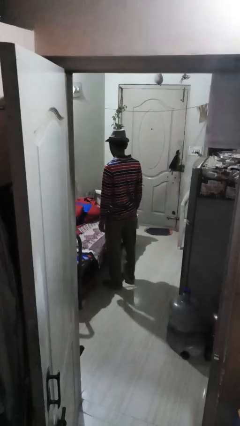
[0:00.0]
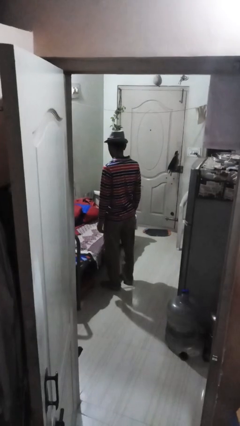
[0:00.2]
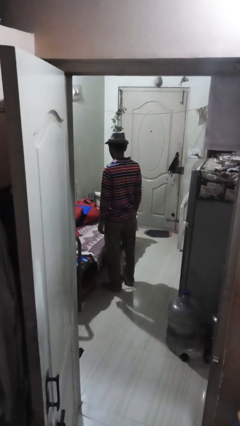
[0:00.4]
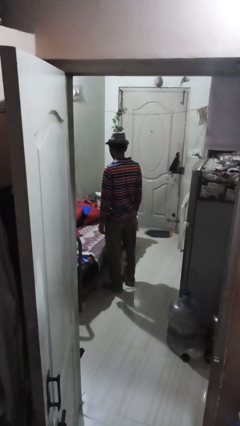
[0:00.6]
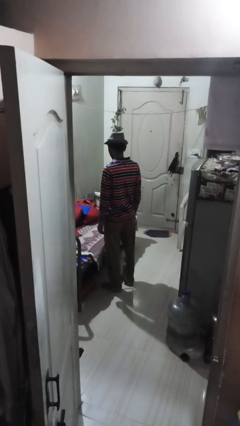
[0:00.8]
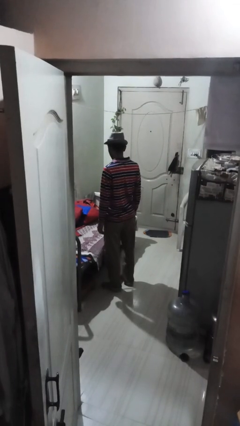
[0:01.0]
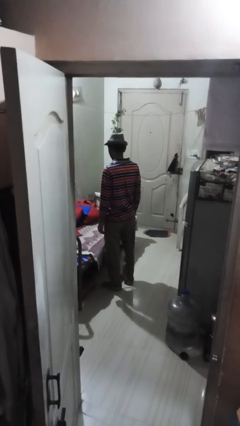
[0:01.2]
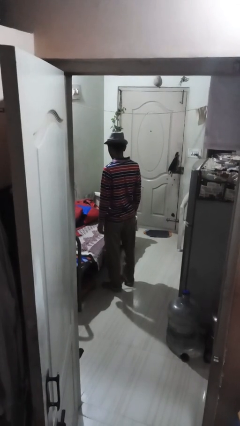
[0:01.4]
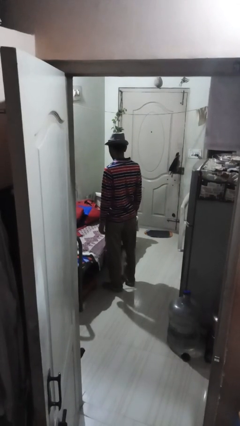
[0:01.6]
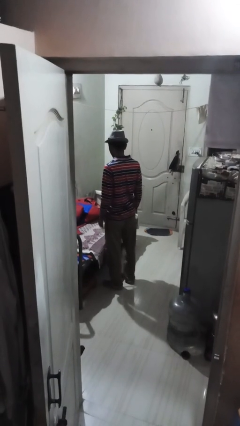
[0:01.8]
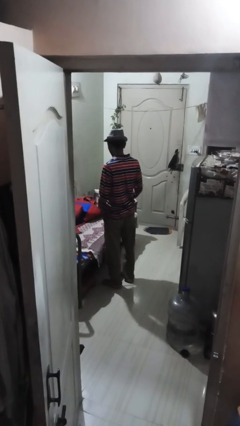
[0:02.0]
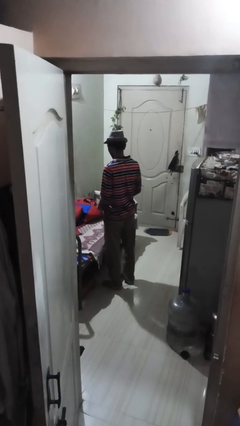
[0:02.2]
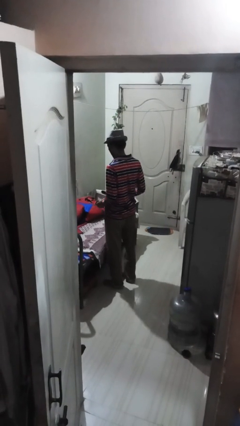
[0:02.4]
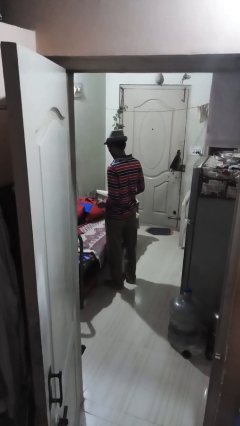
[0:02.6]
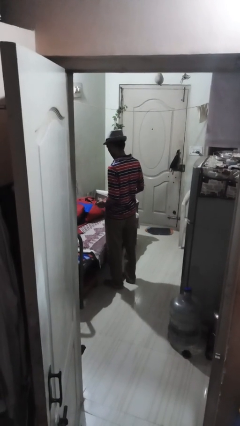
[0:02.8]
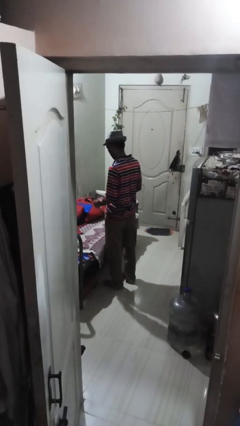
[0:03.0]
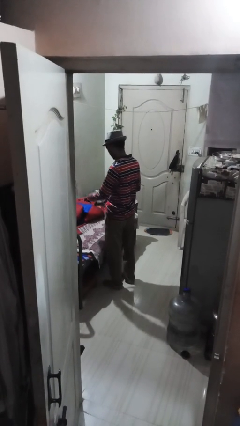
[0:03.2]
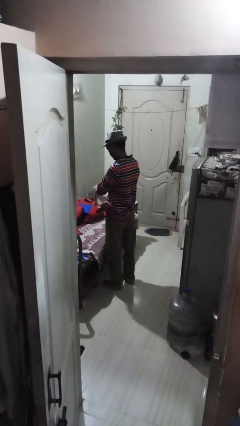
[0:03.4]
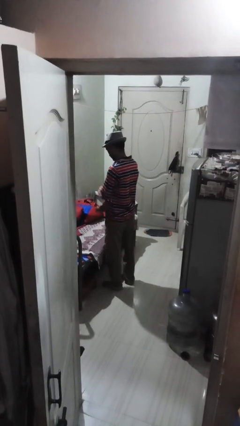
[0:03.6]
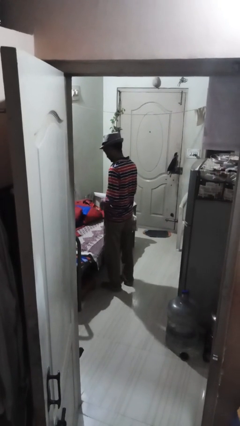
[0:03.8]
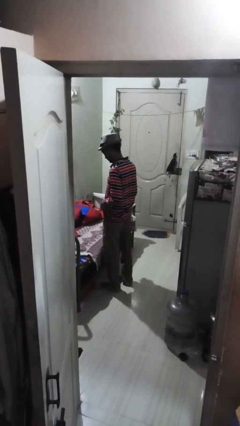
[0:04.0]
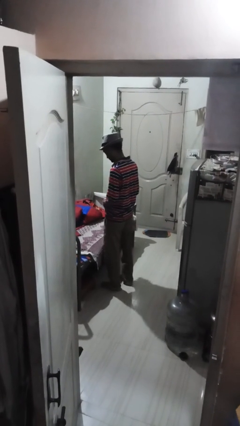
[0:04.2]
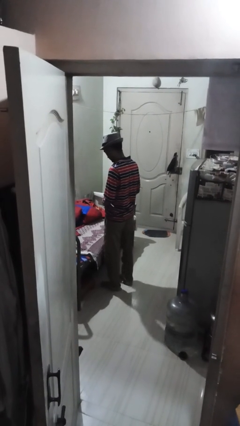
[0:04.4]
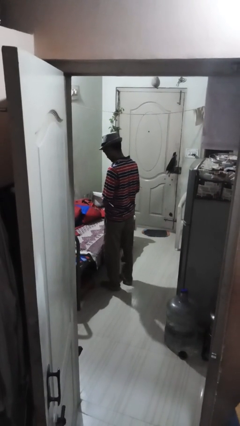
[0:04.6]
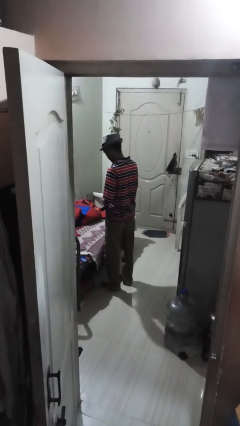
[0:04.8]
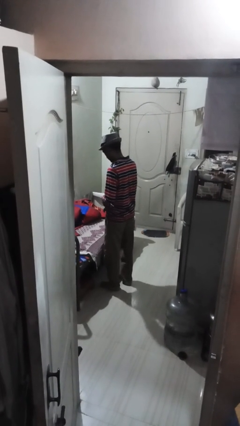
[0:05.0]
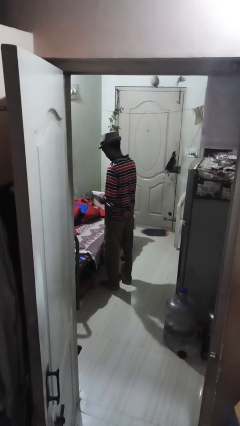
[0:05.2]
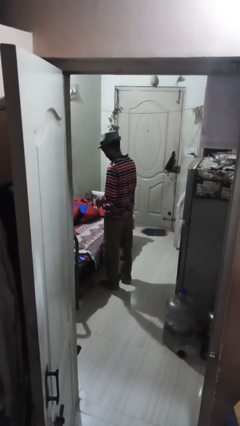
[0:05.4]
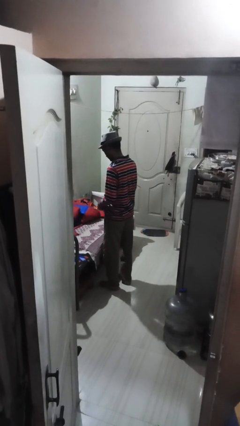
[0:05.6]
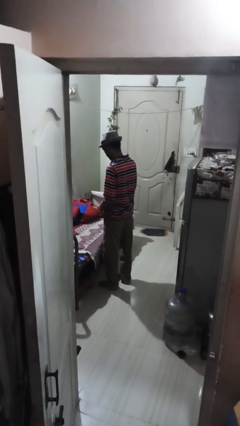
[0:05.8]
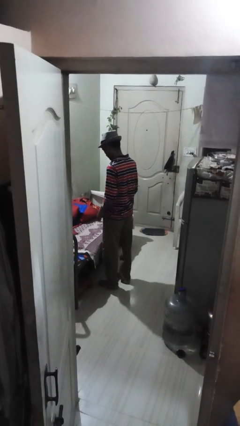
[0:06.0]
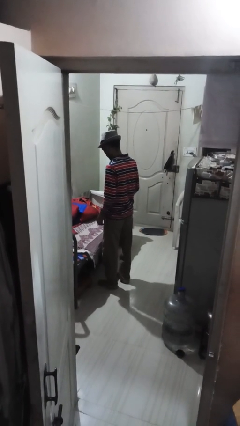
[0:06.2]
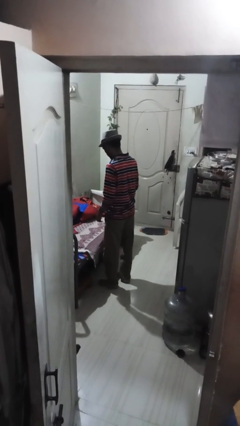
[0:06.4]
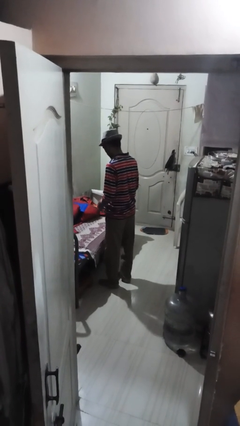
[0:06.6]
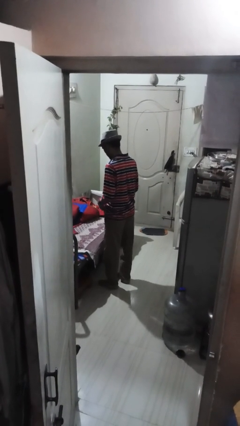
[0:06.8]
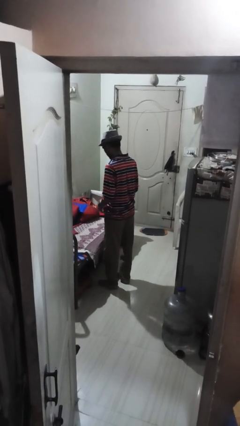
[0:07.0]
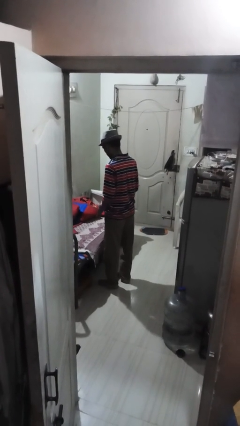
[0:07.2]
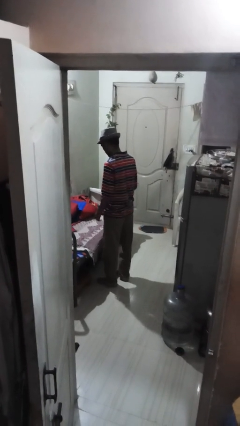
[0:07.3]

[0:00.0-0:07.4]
person puts on belt

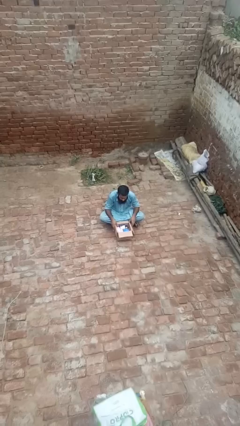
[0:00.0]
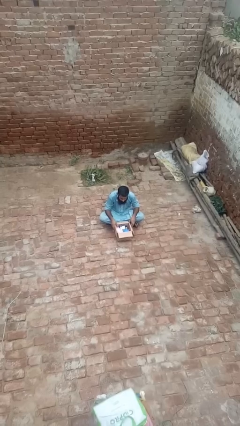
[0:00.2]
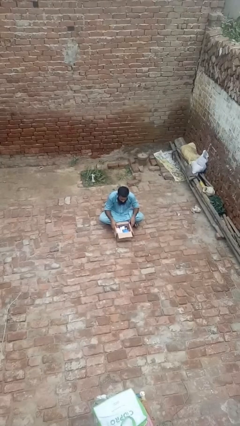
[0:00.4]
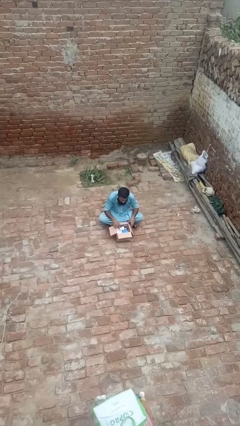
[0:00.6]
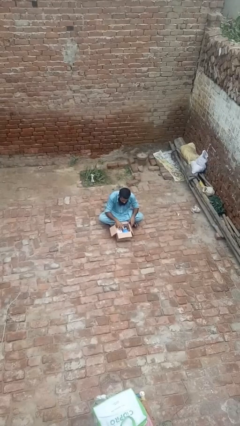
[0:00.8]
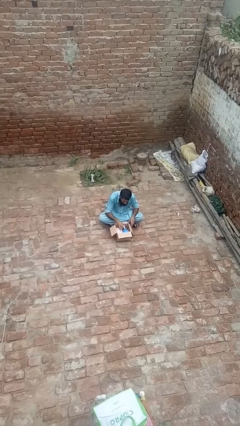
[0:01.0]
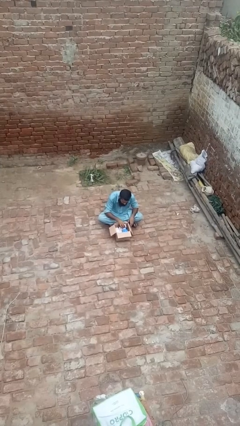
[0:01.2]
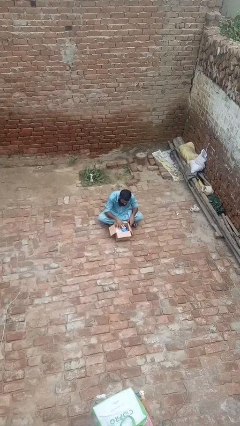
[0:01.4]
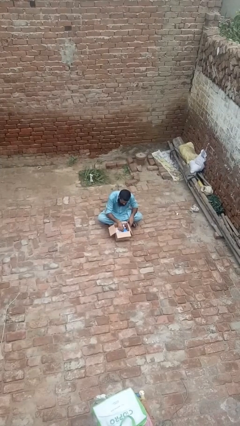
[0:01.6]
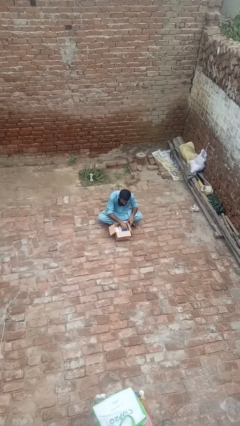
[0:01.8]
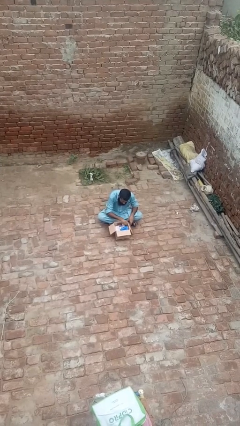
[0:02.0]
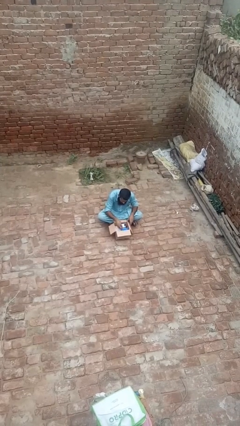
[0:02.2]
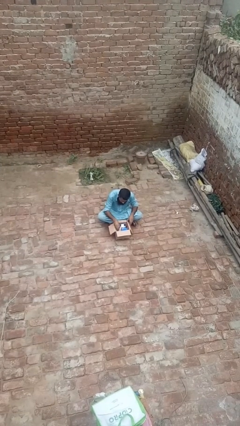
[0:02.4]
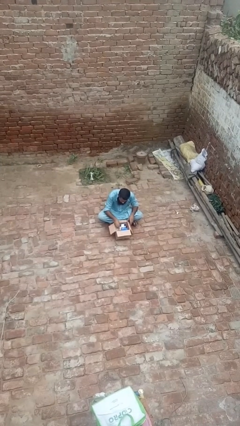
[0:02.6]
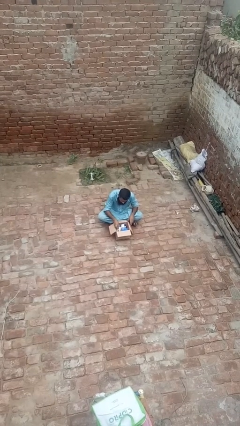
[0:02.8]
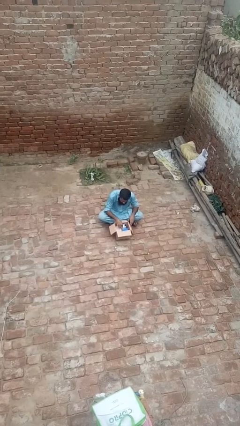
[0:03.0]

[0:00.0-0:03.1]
person searches in box

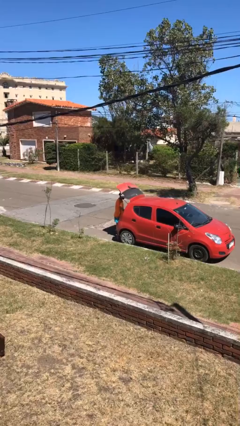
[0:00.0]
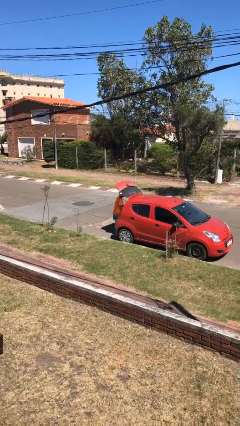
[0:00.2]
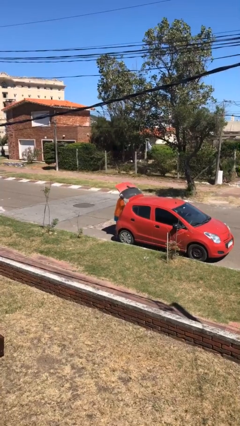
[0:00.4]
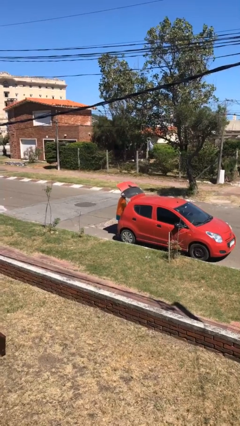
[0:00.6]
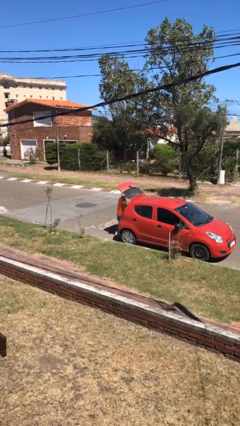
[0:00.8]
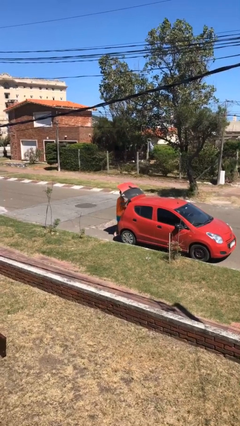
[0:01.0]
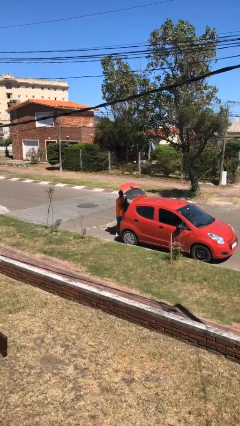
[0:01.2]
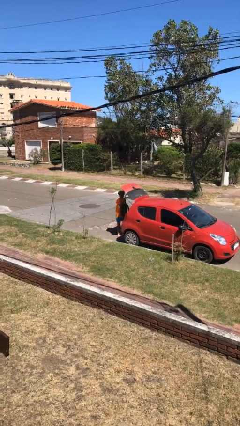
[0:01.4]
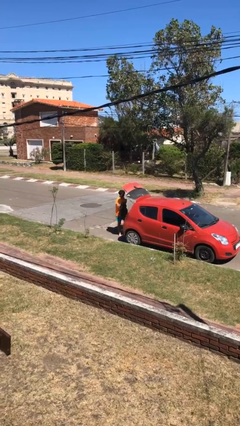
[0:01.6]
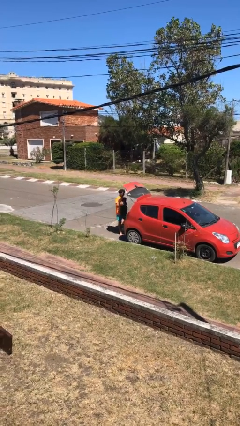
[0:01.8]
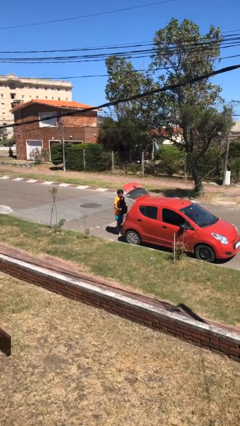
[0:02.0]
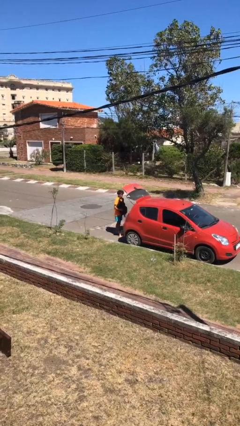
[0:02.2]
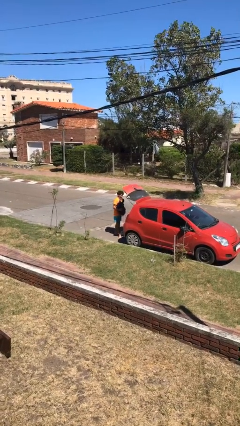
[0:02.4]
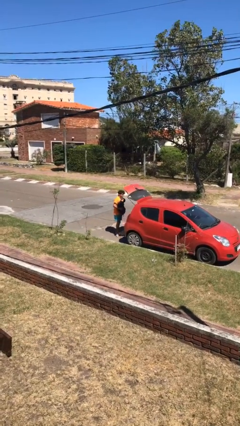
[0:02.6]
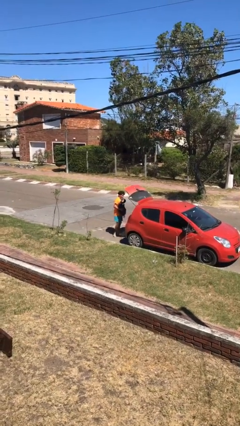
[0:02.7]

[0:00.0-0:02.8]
person unloads car

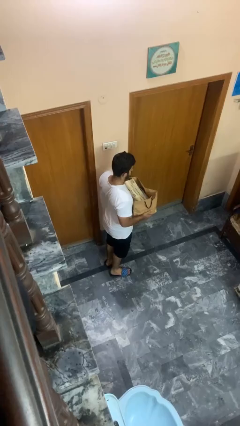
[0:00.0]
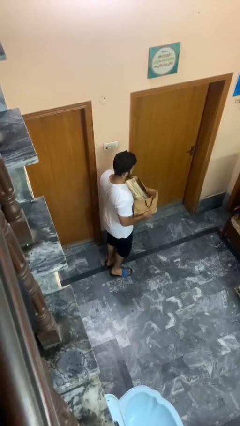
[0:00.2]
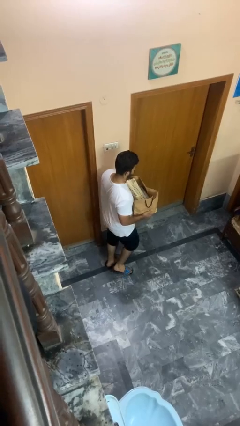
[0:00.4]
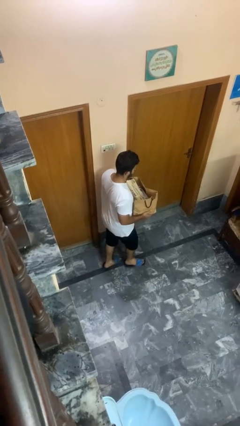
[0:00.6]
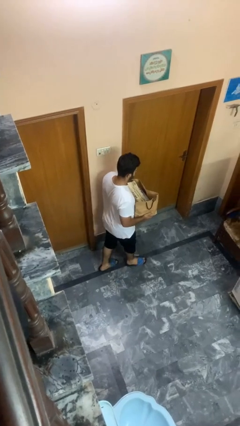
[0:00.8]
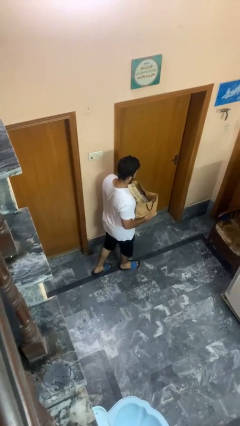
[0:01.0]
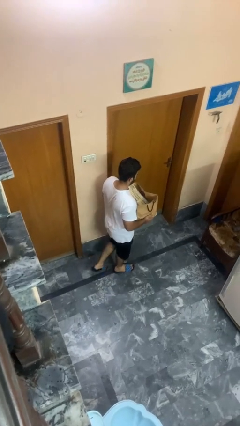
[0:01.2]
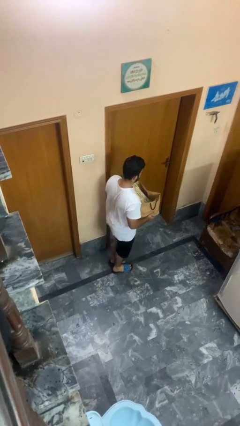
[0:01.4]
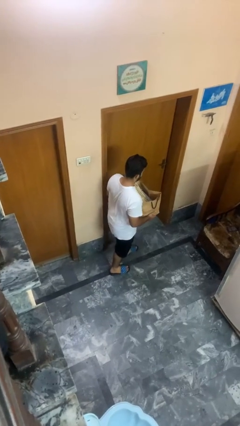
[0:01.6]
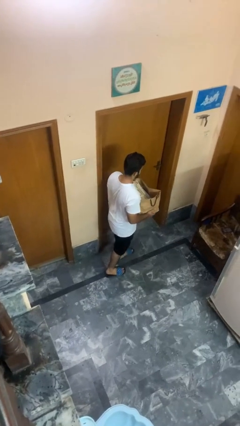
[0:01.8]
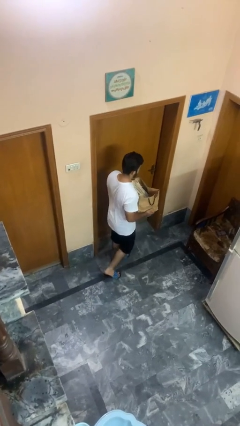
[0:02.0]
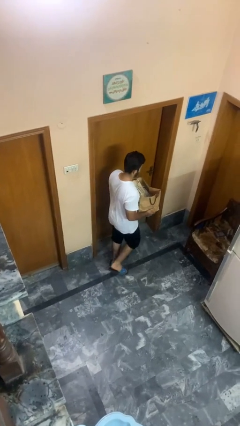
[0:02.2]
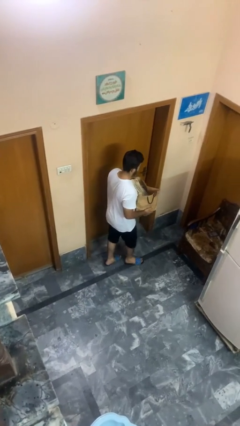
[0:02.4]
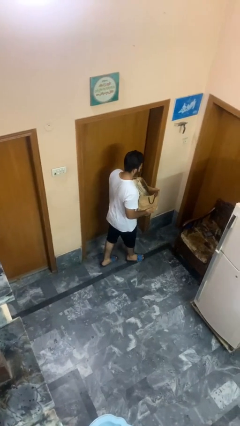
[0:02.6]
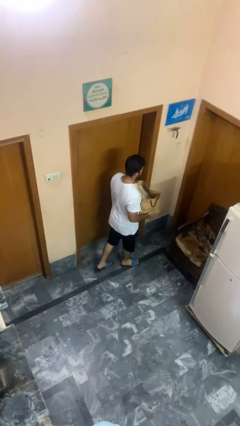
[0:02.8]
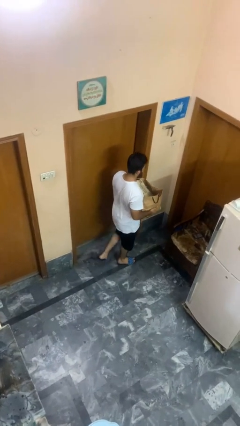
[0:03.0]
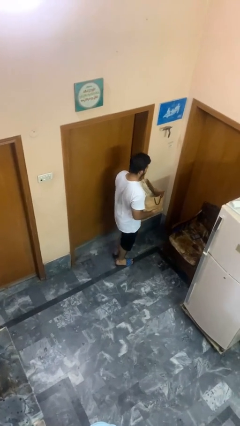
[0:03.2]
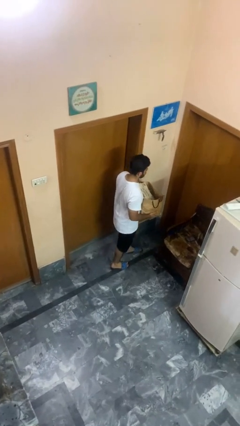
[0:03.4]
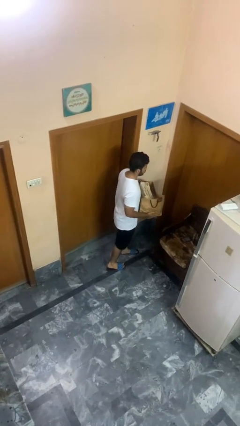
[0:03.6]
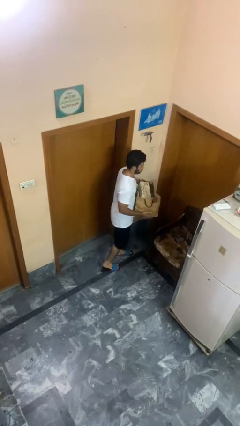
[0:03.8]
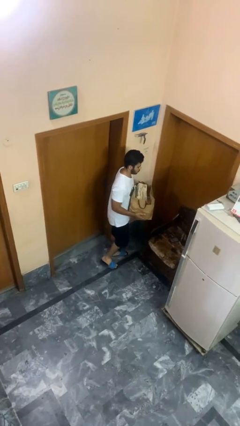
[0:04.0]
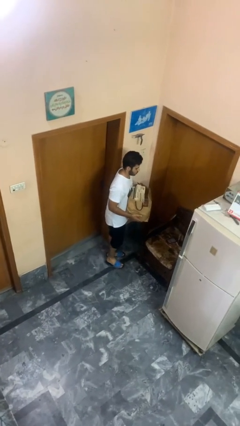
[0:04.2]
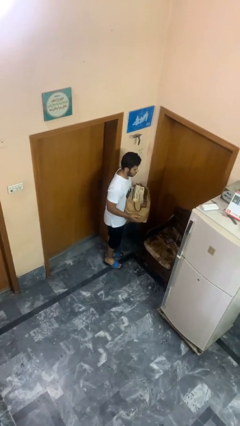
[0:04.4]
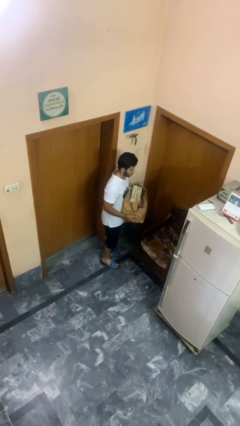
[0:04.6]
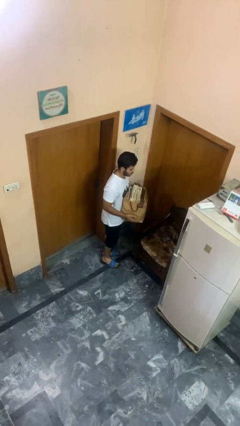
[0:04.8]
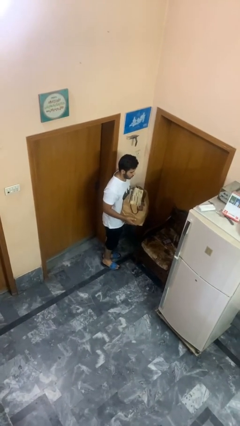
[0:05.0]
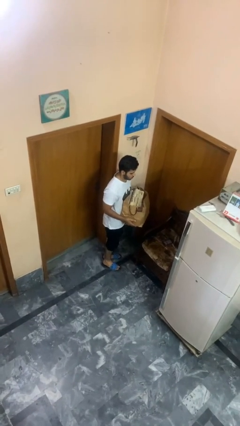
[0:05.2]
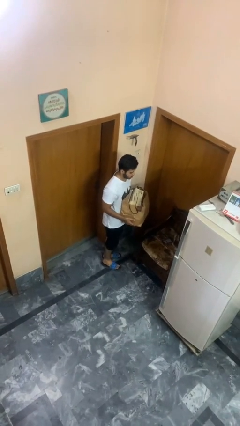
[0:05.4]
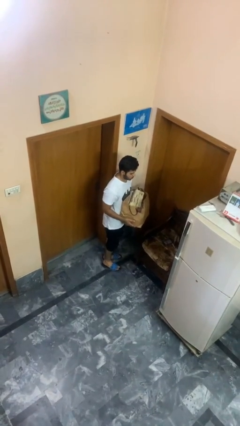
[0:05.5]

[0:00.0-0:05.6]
person carries groceries
